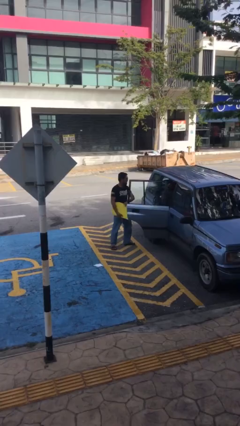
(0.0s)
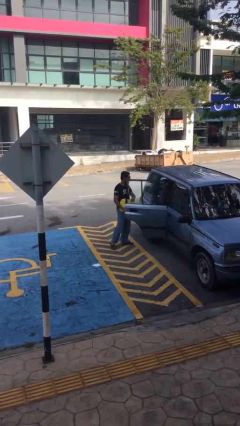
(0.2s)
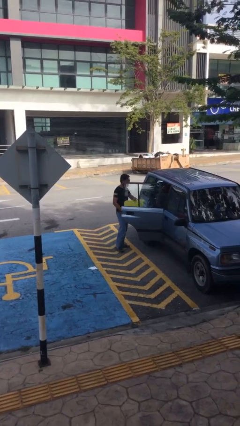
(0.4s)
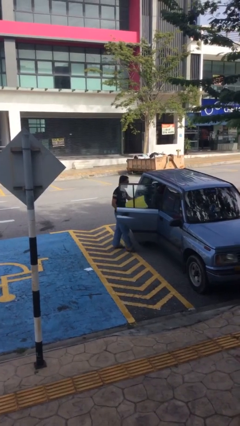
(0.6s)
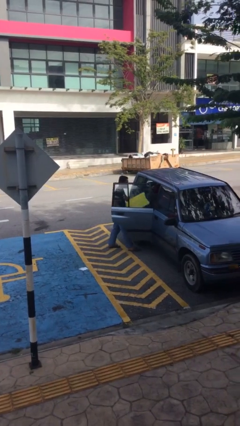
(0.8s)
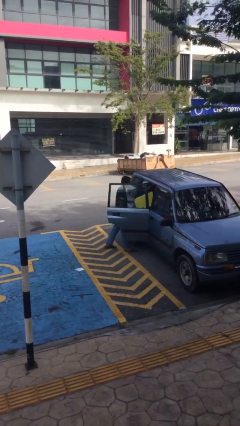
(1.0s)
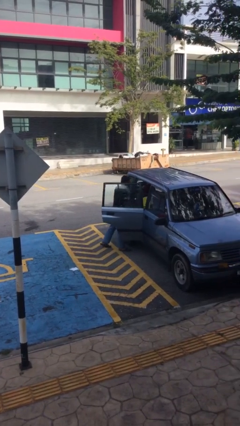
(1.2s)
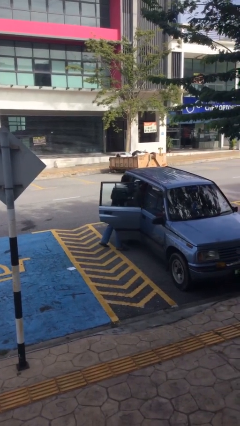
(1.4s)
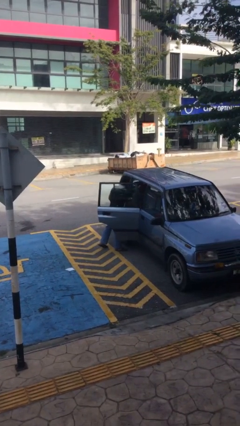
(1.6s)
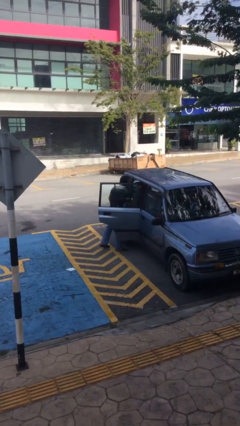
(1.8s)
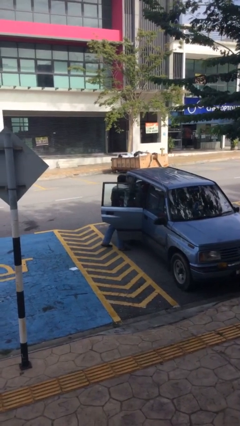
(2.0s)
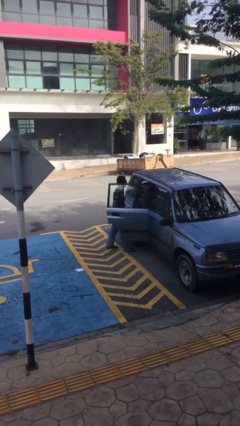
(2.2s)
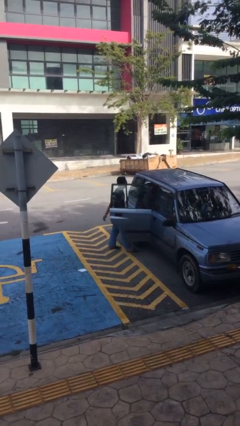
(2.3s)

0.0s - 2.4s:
person loads car

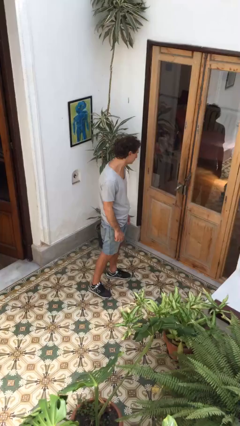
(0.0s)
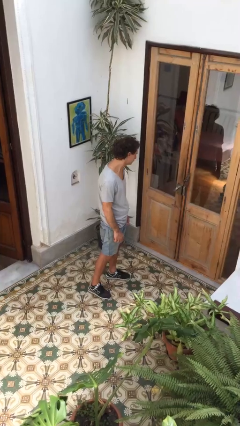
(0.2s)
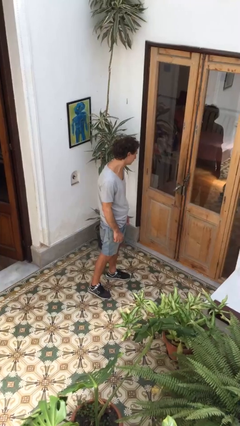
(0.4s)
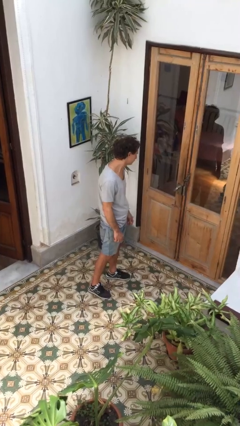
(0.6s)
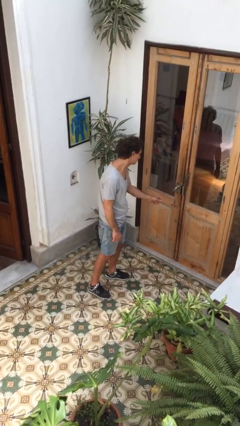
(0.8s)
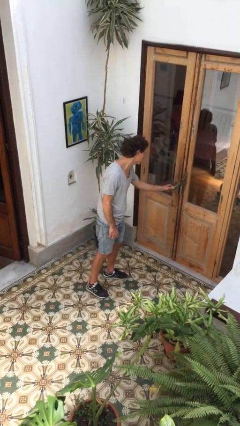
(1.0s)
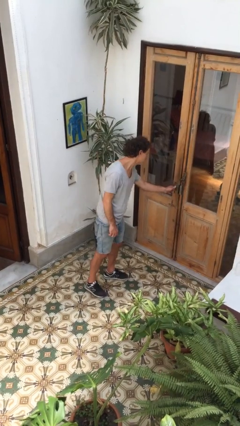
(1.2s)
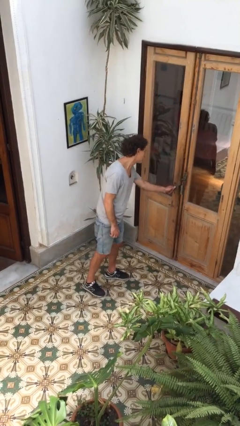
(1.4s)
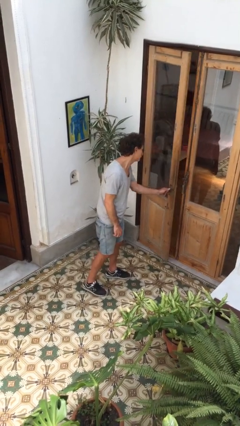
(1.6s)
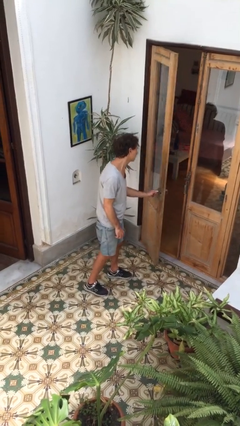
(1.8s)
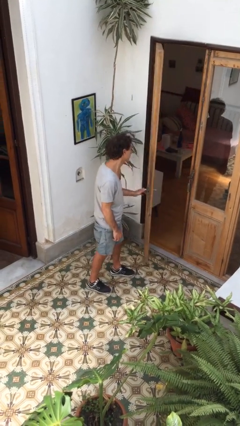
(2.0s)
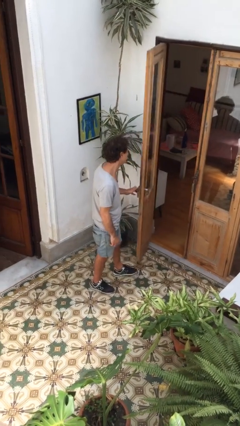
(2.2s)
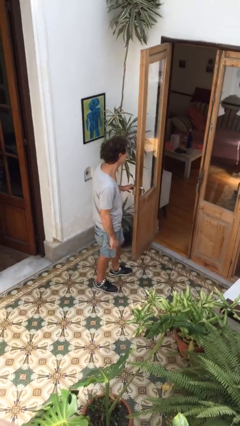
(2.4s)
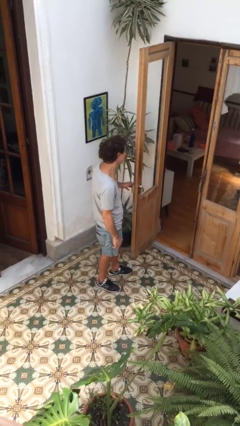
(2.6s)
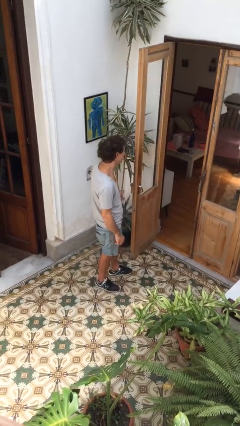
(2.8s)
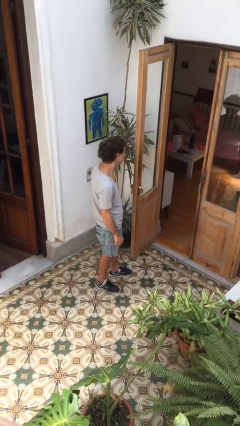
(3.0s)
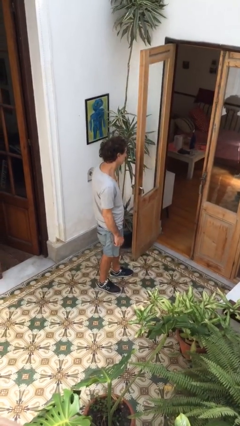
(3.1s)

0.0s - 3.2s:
person opens facility door

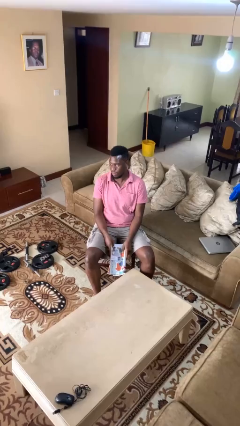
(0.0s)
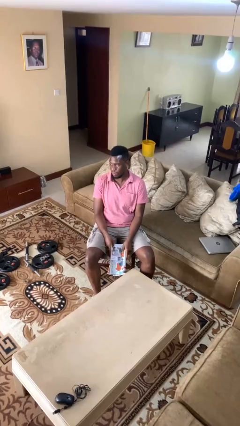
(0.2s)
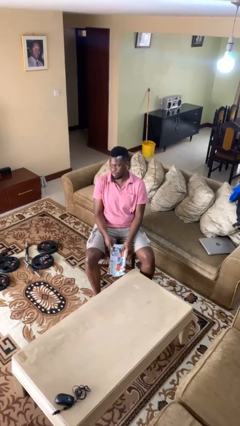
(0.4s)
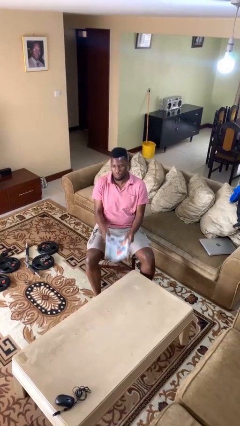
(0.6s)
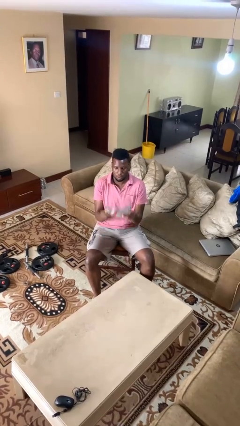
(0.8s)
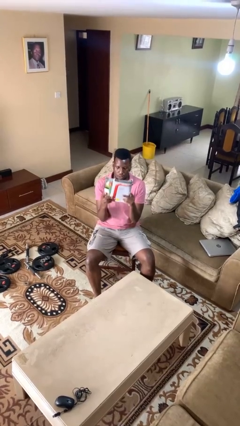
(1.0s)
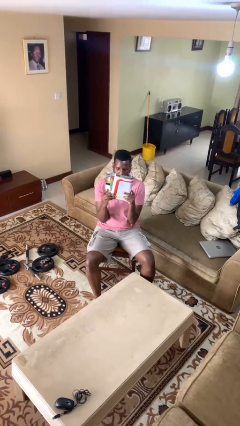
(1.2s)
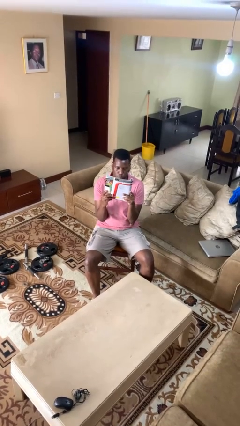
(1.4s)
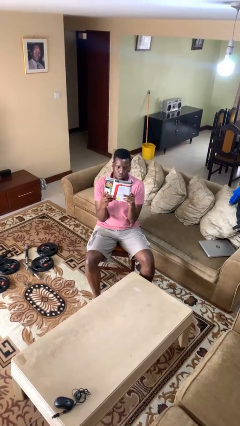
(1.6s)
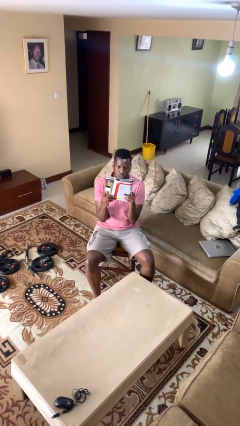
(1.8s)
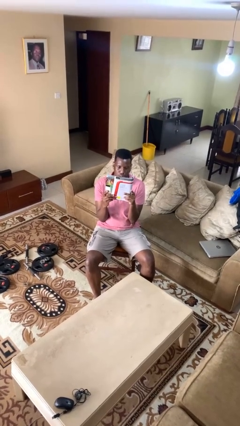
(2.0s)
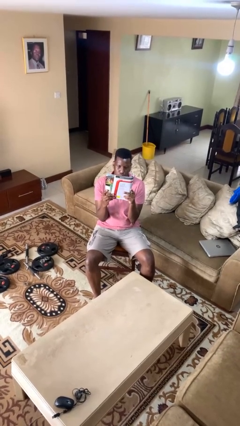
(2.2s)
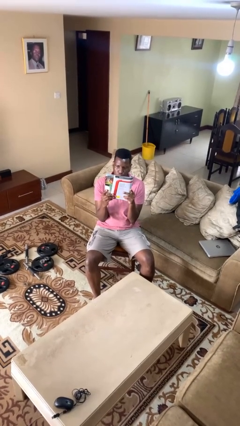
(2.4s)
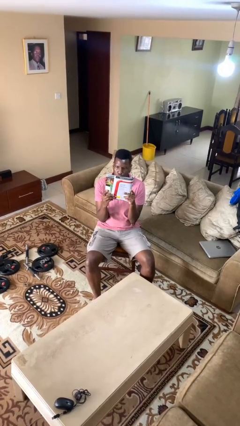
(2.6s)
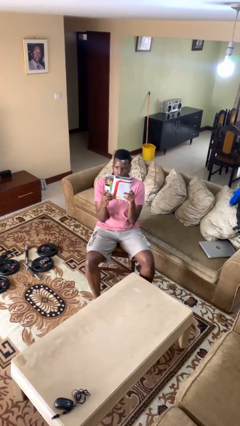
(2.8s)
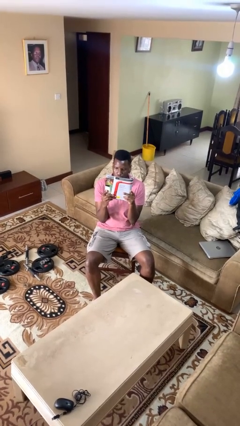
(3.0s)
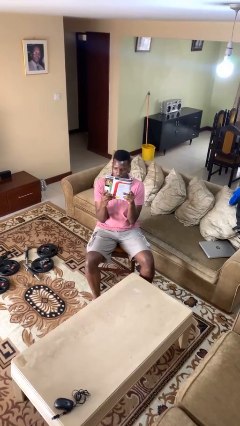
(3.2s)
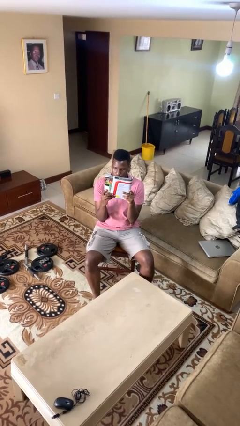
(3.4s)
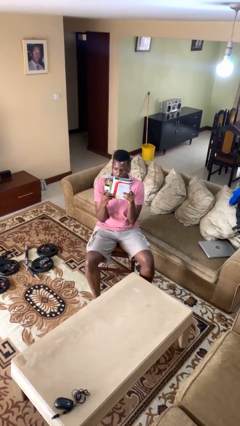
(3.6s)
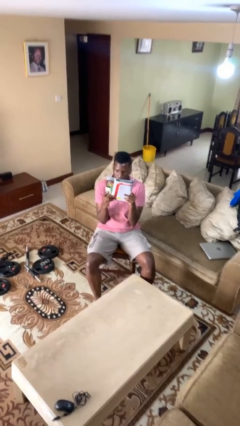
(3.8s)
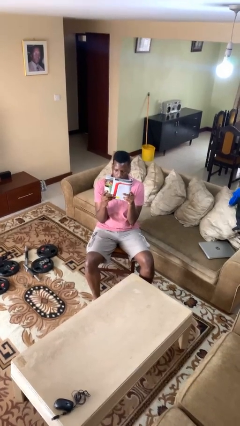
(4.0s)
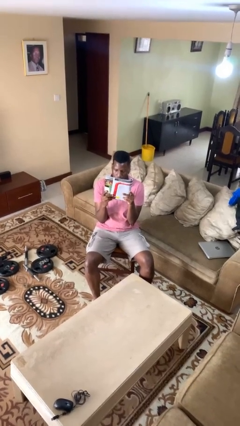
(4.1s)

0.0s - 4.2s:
person reads document

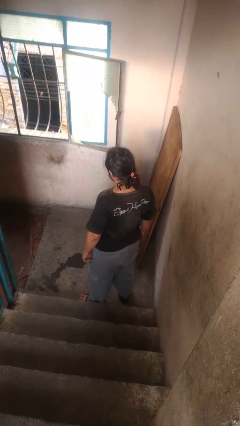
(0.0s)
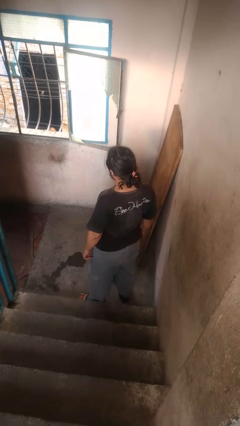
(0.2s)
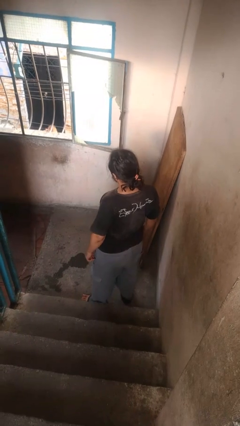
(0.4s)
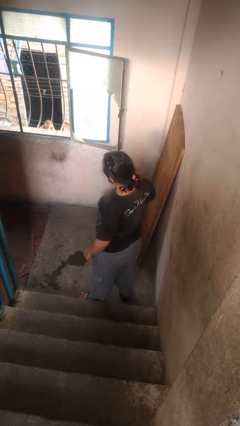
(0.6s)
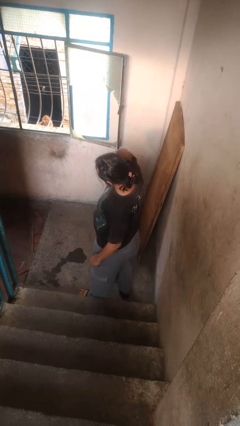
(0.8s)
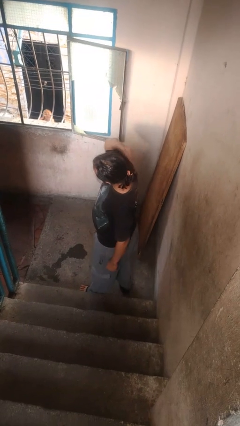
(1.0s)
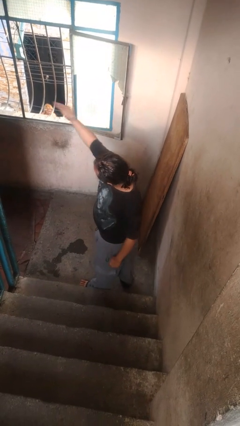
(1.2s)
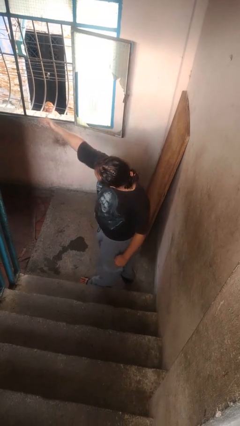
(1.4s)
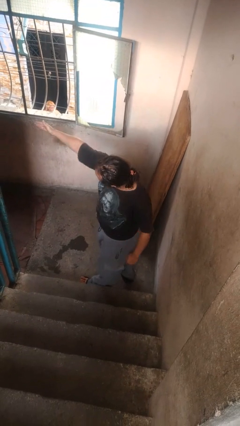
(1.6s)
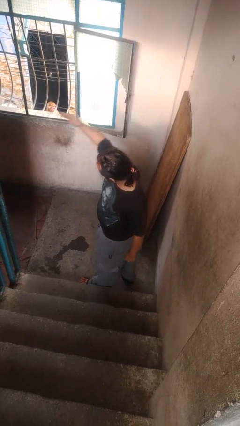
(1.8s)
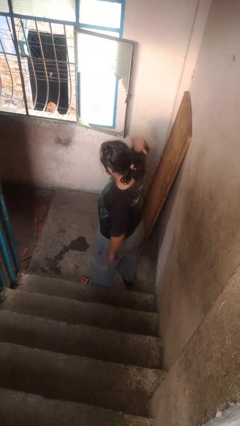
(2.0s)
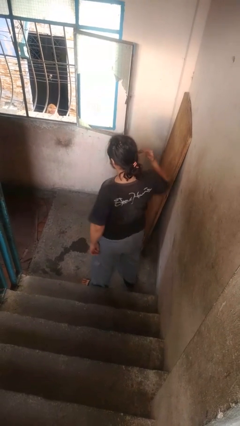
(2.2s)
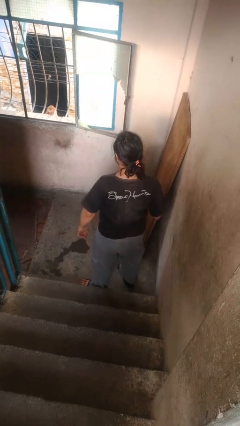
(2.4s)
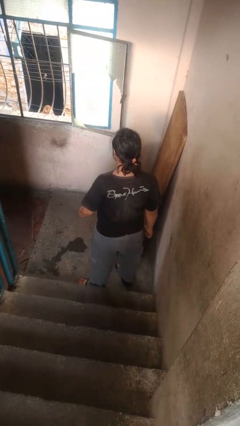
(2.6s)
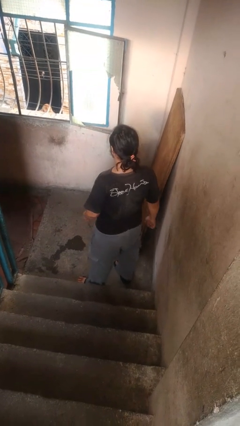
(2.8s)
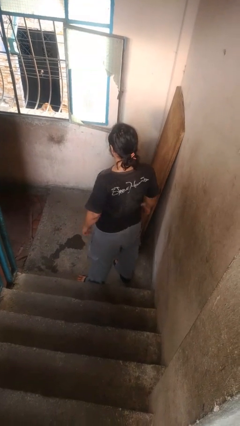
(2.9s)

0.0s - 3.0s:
person karate chop

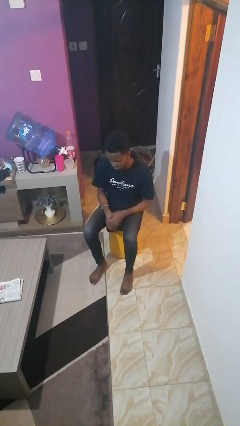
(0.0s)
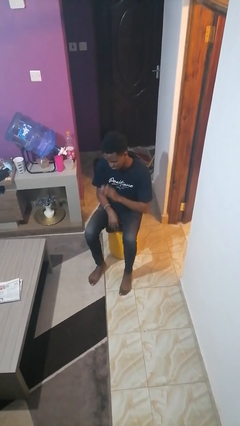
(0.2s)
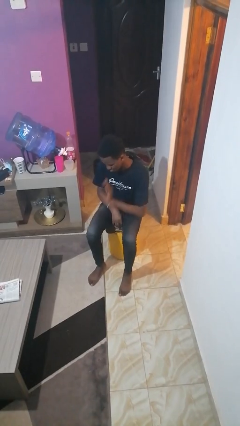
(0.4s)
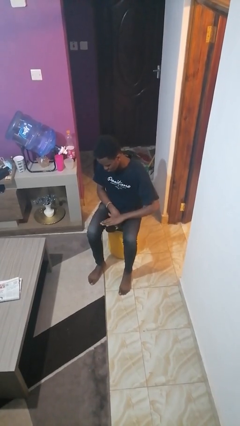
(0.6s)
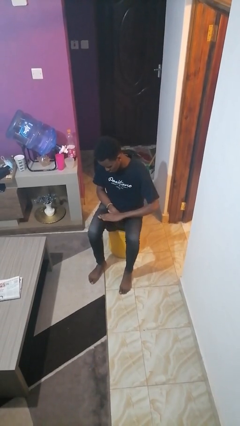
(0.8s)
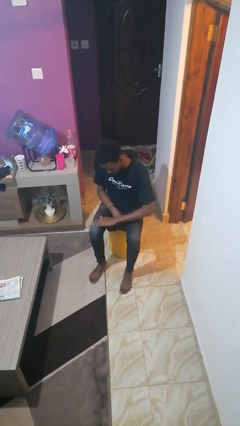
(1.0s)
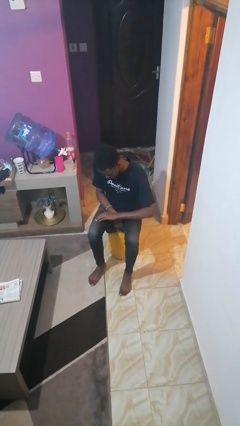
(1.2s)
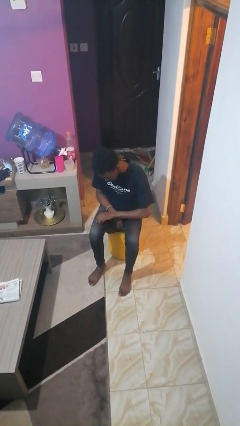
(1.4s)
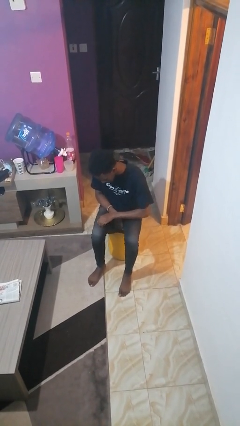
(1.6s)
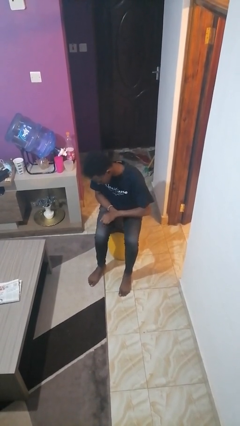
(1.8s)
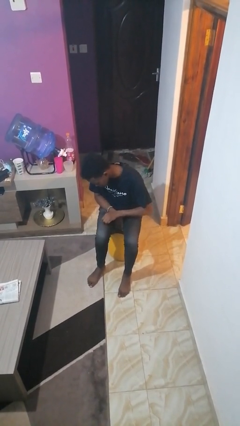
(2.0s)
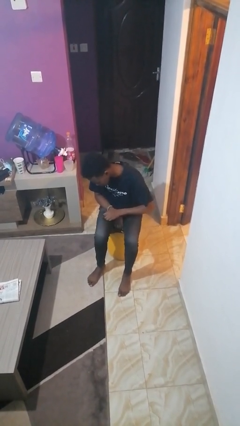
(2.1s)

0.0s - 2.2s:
person swats bug

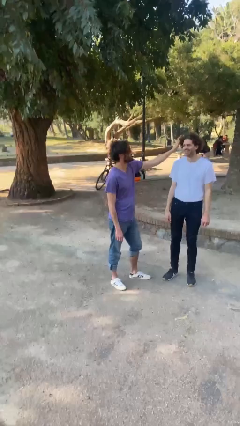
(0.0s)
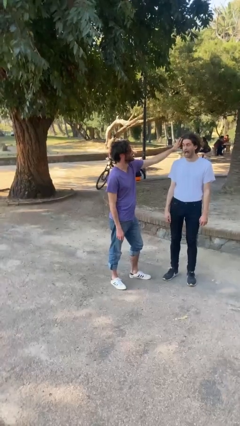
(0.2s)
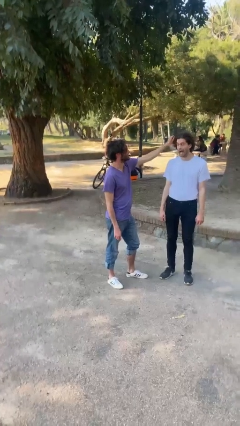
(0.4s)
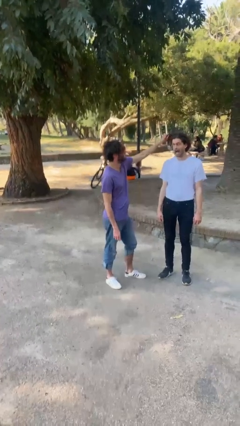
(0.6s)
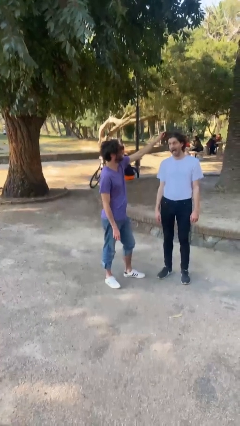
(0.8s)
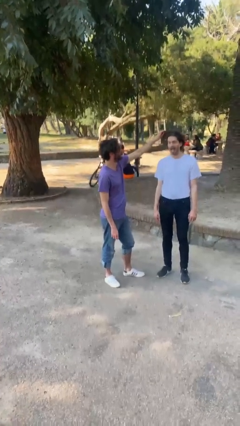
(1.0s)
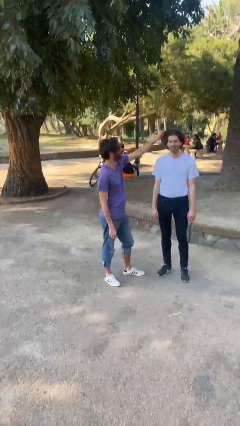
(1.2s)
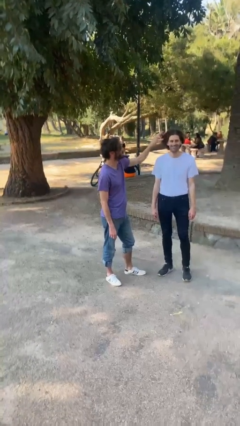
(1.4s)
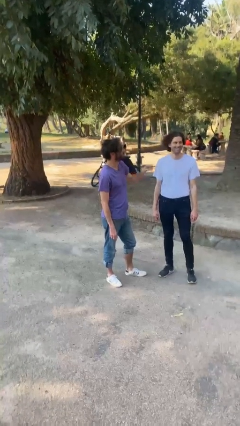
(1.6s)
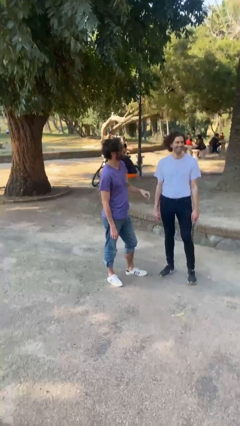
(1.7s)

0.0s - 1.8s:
person grabs person by hair

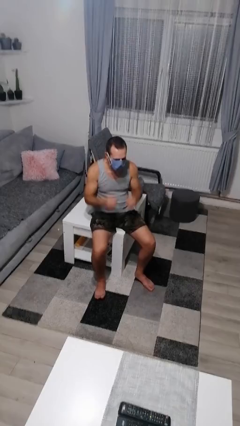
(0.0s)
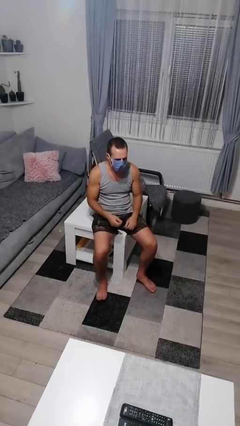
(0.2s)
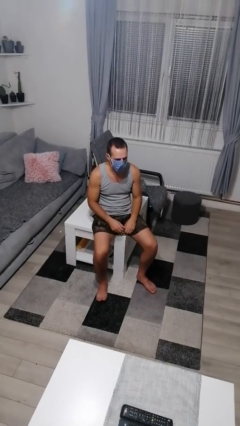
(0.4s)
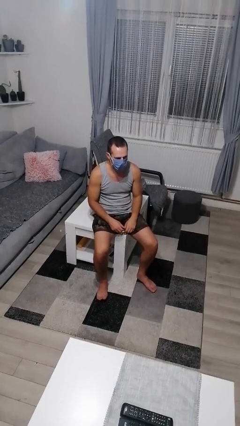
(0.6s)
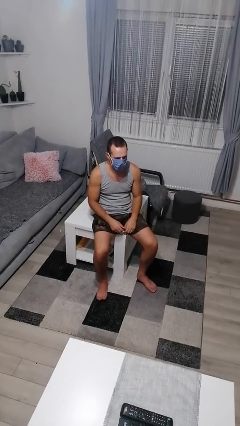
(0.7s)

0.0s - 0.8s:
person puts on facemask
